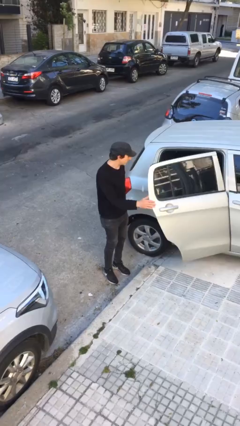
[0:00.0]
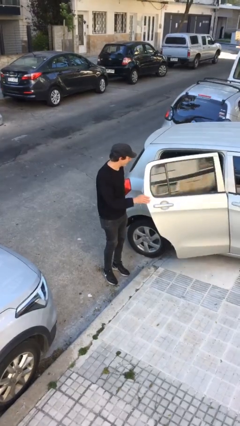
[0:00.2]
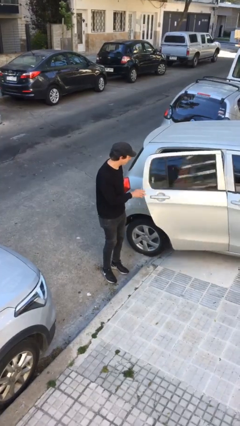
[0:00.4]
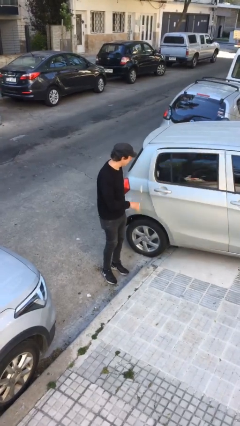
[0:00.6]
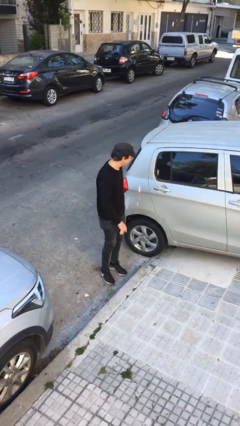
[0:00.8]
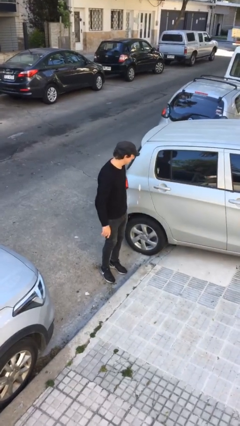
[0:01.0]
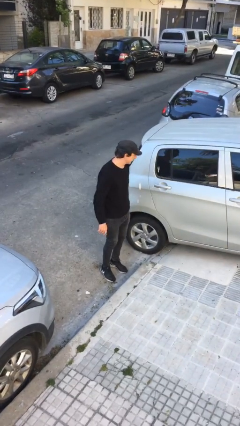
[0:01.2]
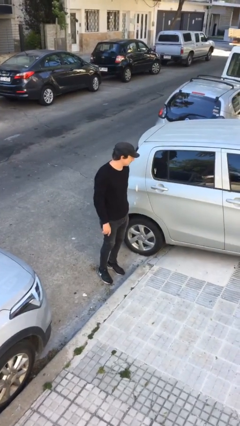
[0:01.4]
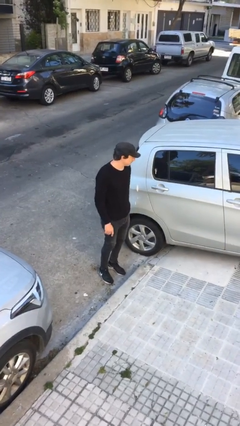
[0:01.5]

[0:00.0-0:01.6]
person closes car door

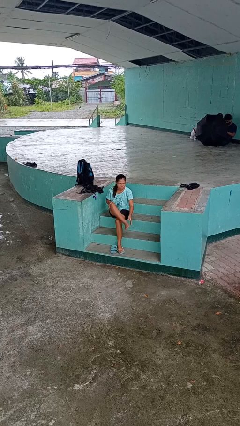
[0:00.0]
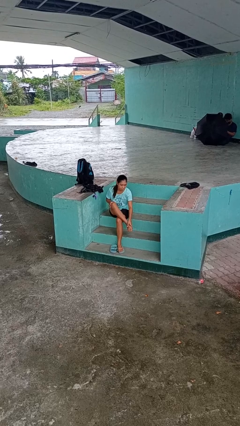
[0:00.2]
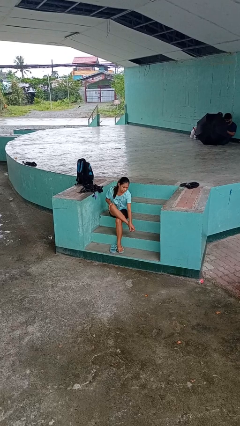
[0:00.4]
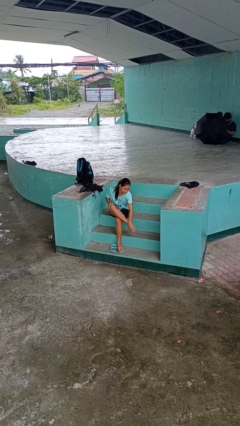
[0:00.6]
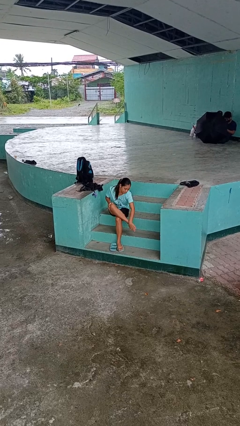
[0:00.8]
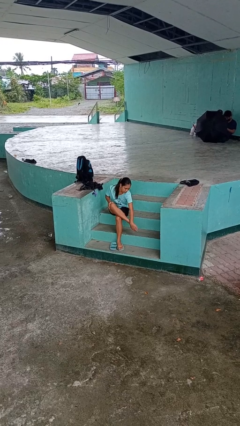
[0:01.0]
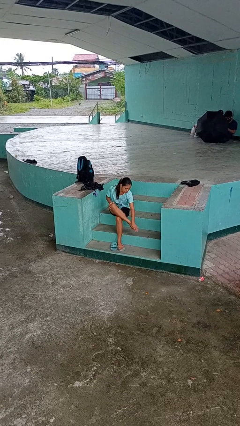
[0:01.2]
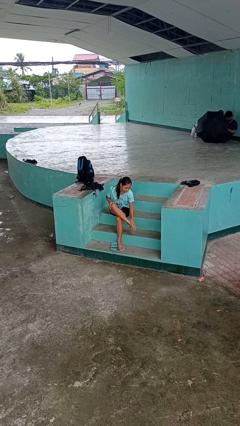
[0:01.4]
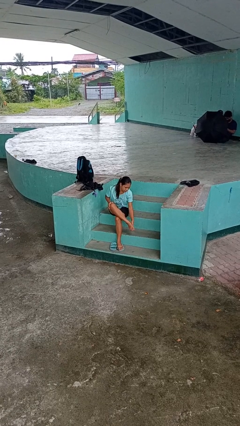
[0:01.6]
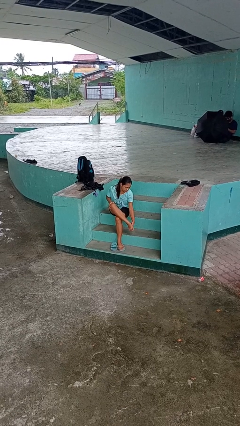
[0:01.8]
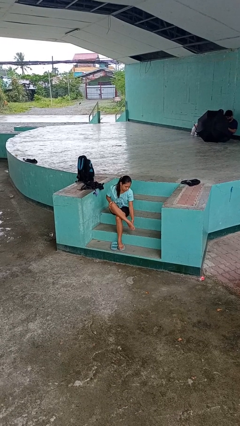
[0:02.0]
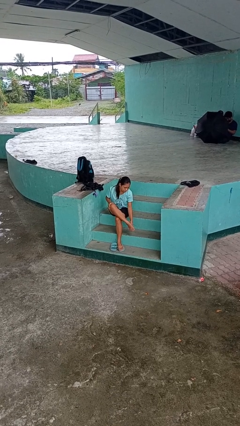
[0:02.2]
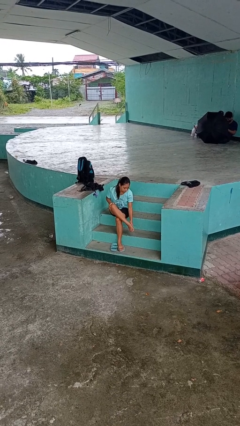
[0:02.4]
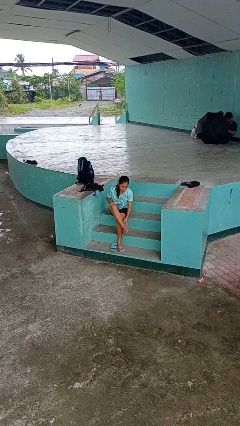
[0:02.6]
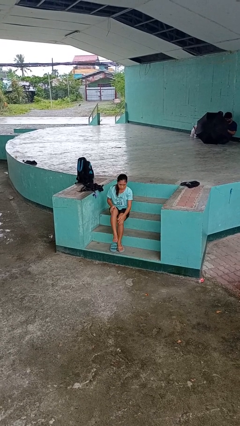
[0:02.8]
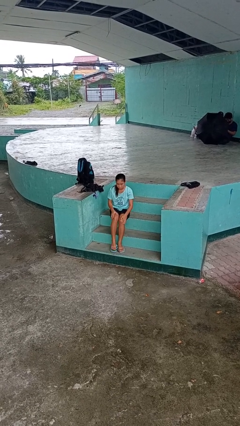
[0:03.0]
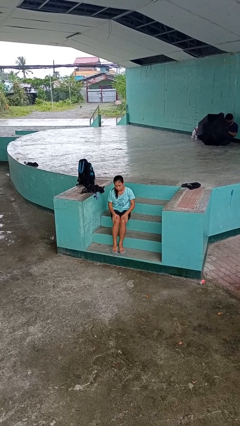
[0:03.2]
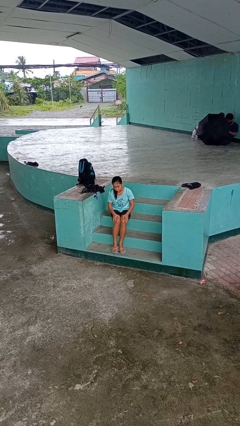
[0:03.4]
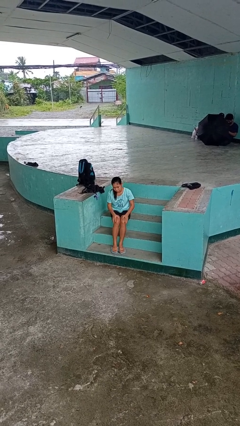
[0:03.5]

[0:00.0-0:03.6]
person rubs foot

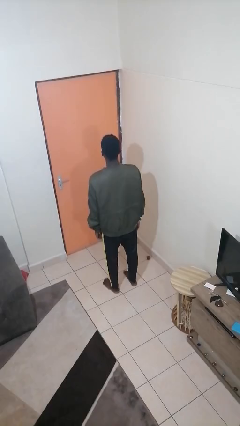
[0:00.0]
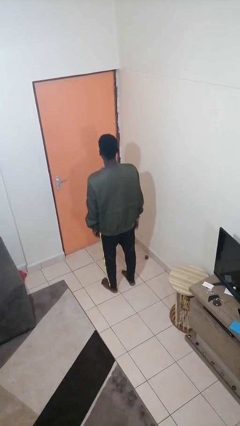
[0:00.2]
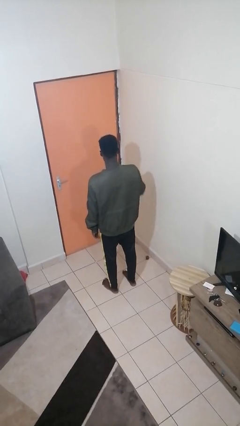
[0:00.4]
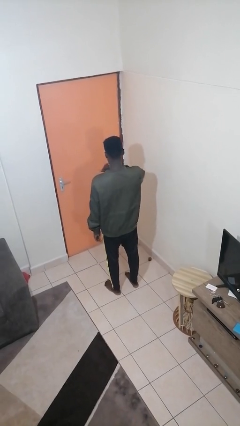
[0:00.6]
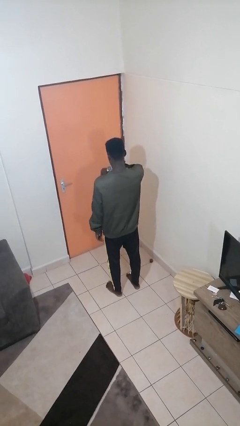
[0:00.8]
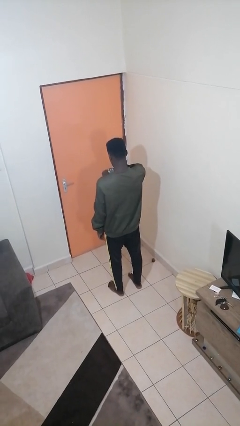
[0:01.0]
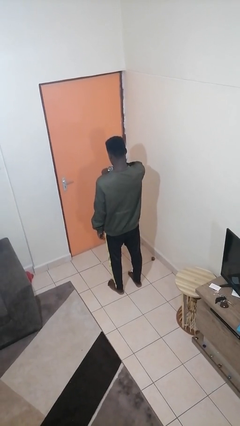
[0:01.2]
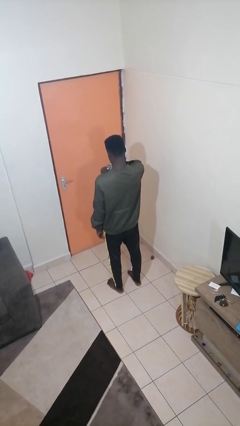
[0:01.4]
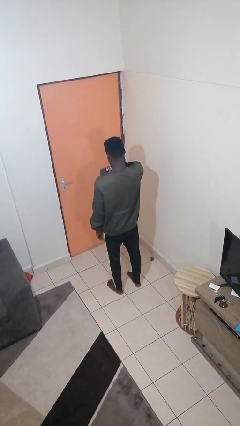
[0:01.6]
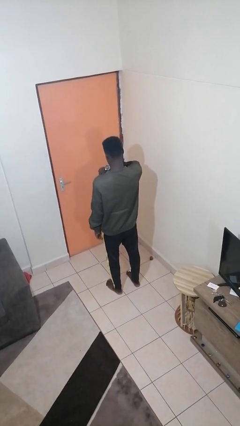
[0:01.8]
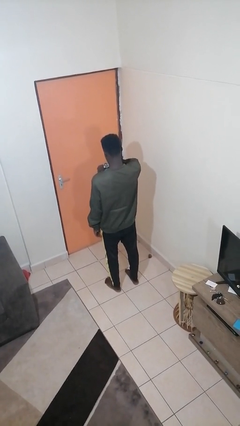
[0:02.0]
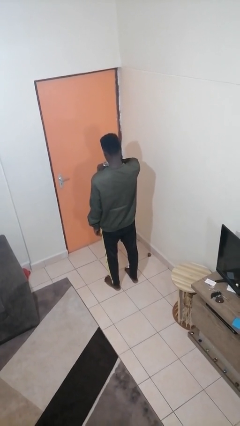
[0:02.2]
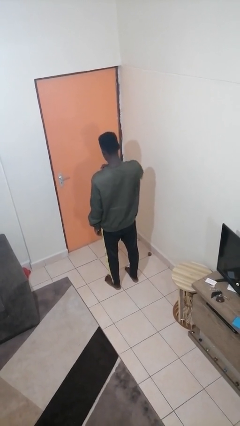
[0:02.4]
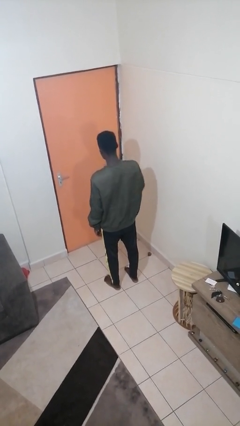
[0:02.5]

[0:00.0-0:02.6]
person looks at wristwatch

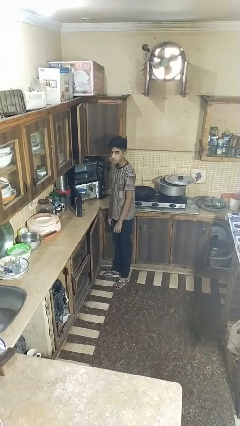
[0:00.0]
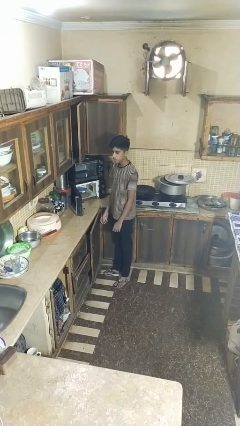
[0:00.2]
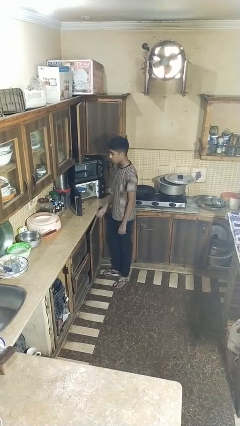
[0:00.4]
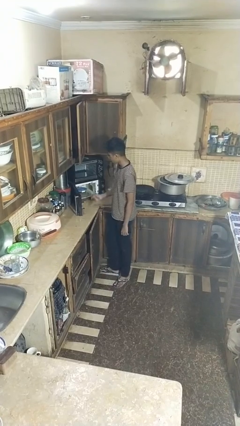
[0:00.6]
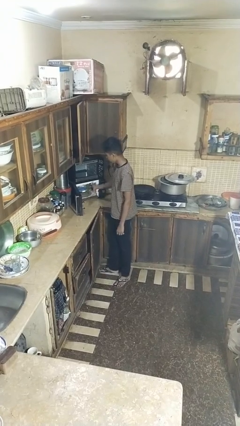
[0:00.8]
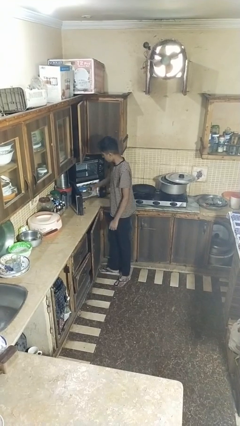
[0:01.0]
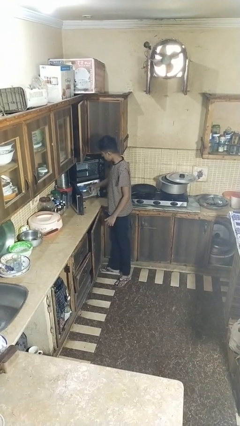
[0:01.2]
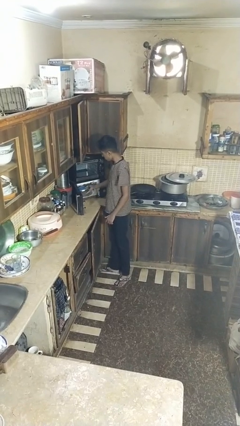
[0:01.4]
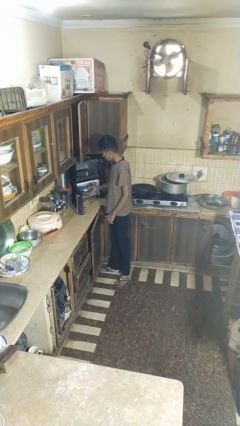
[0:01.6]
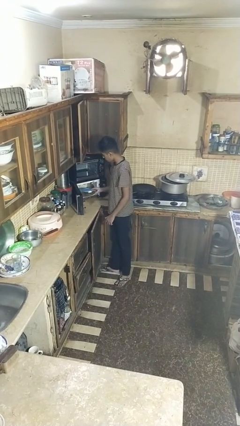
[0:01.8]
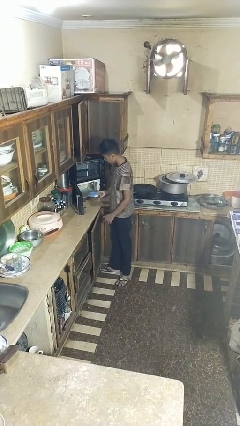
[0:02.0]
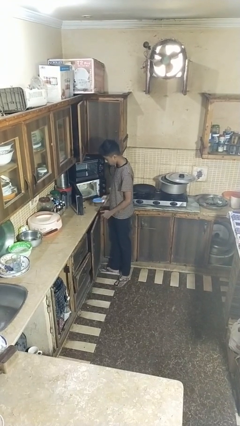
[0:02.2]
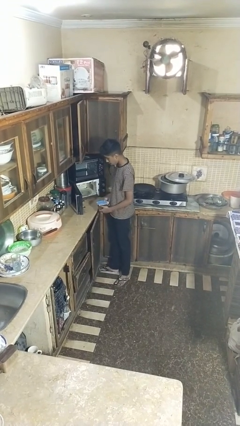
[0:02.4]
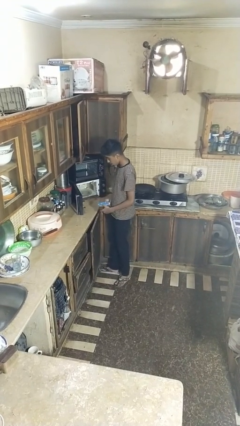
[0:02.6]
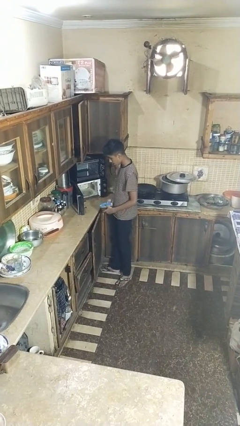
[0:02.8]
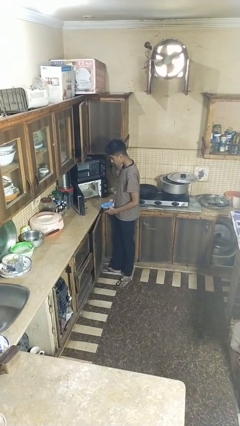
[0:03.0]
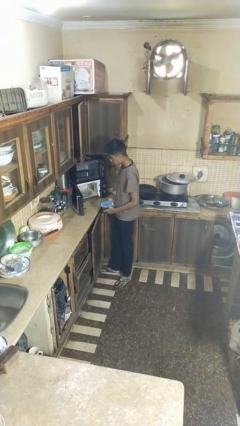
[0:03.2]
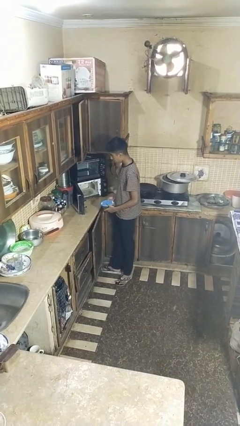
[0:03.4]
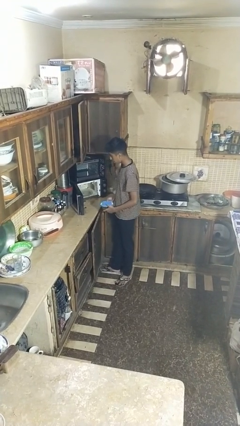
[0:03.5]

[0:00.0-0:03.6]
person takes object from microwave

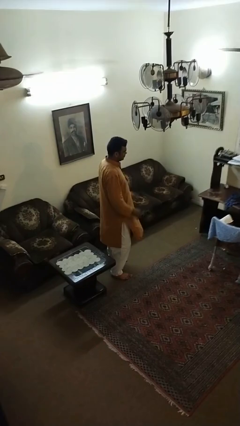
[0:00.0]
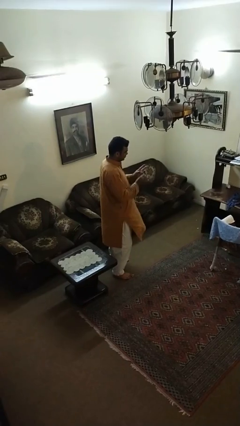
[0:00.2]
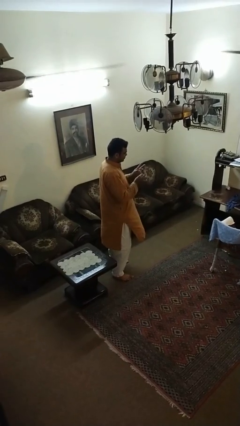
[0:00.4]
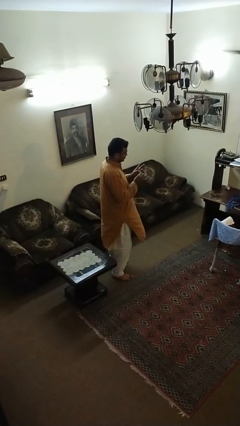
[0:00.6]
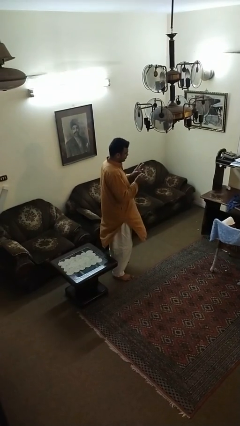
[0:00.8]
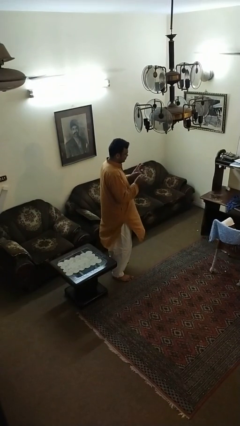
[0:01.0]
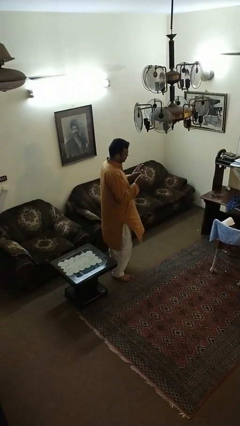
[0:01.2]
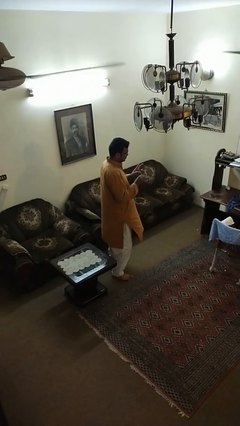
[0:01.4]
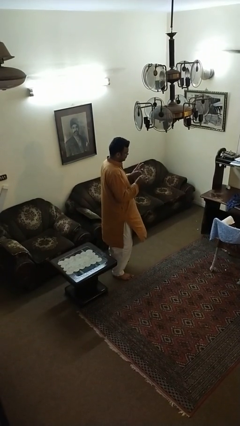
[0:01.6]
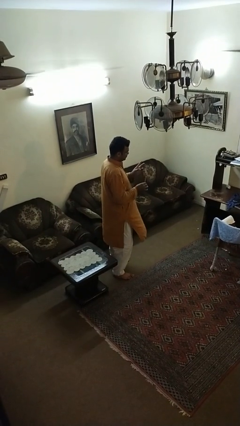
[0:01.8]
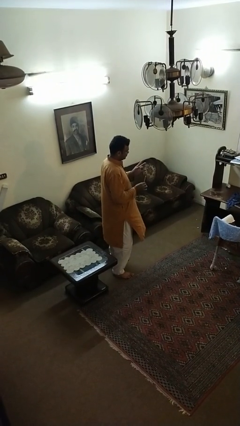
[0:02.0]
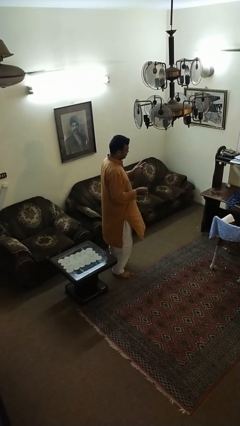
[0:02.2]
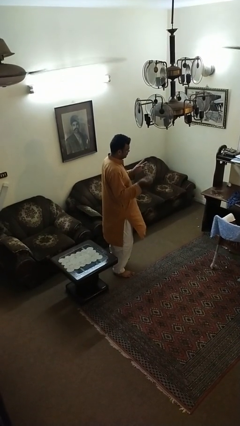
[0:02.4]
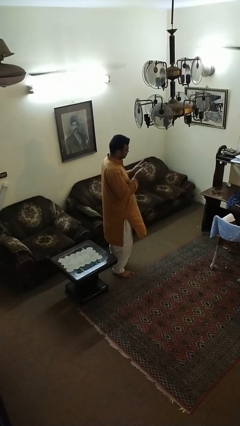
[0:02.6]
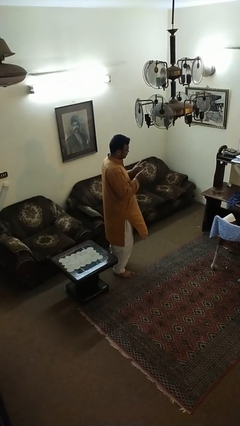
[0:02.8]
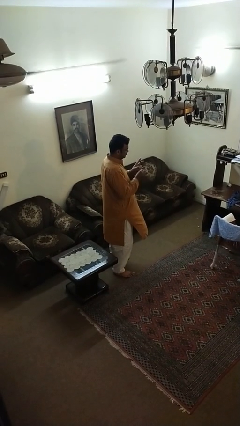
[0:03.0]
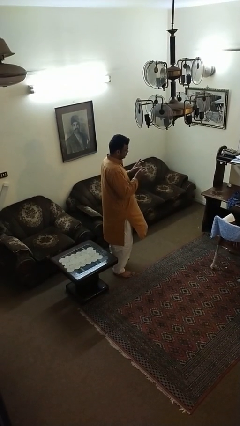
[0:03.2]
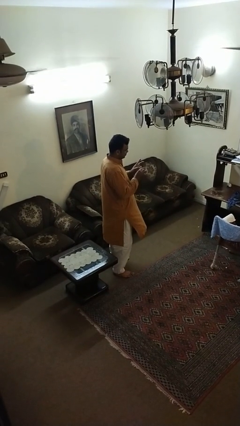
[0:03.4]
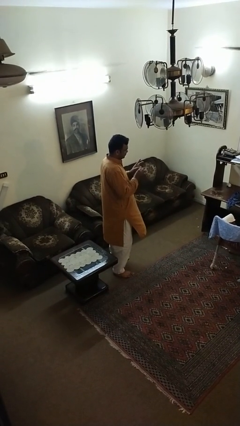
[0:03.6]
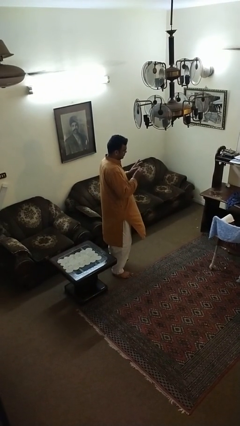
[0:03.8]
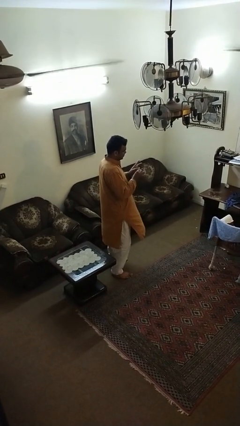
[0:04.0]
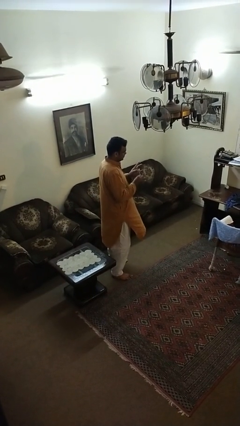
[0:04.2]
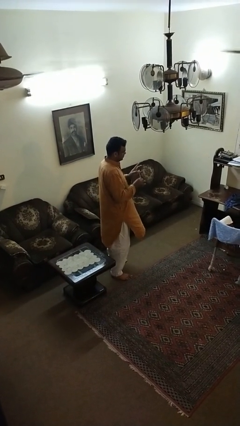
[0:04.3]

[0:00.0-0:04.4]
person files fingernails

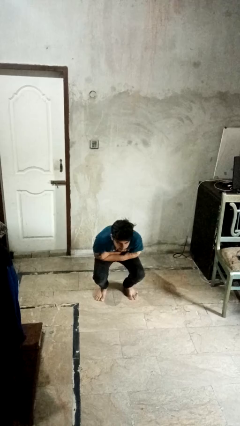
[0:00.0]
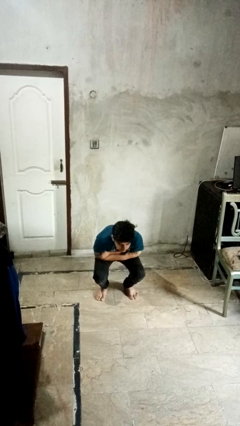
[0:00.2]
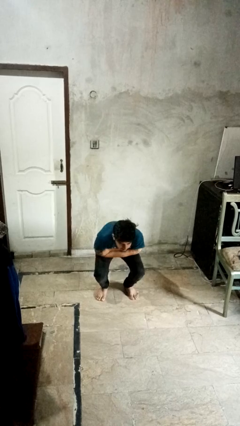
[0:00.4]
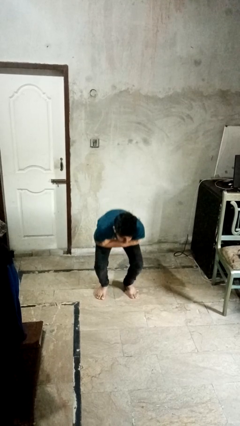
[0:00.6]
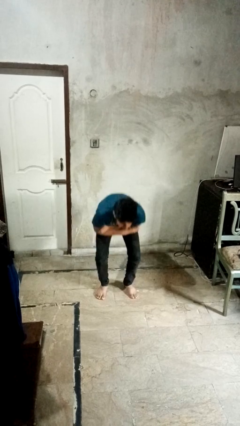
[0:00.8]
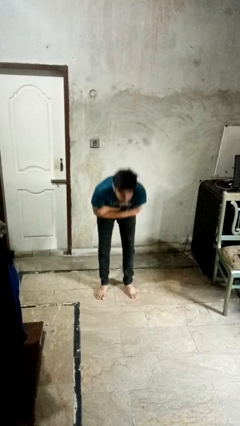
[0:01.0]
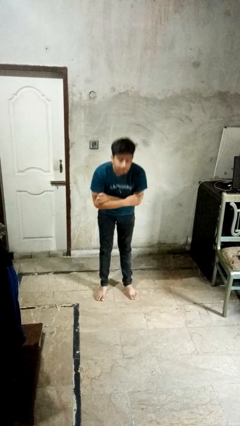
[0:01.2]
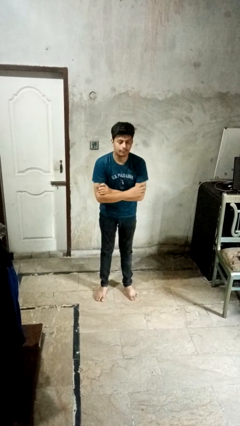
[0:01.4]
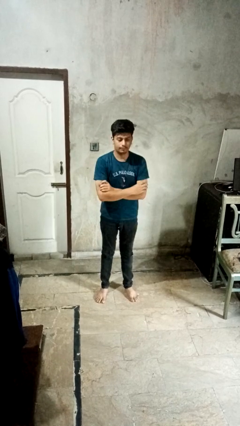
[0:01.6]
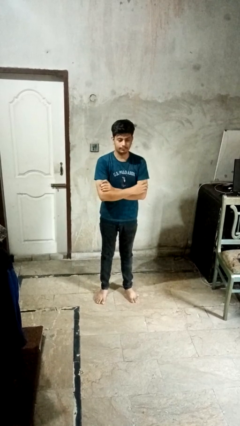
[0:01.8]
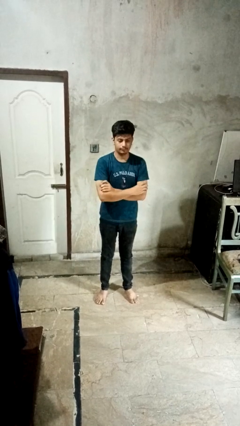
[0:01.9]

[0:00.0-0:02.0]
person stands up
